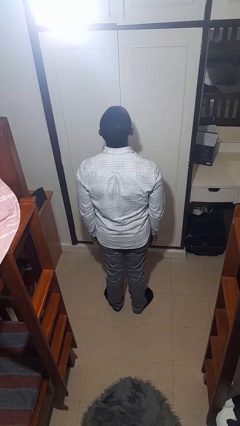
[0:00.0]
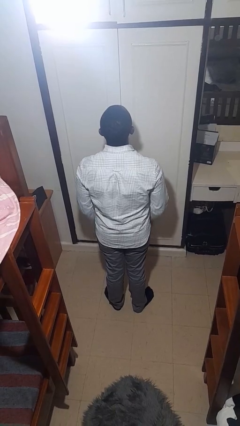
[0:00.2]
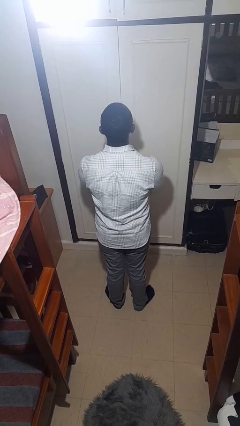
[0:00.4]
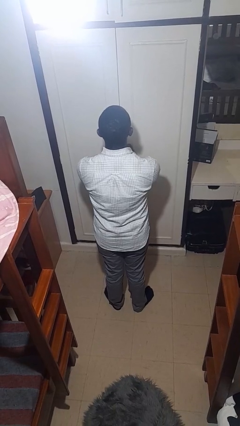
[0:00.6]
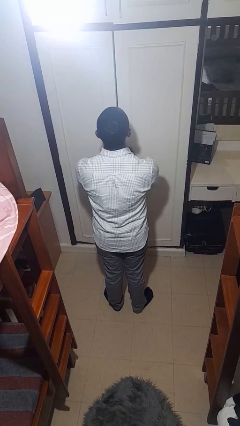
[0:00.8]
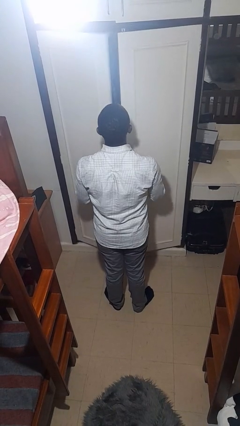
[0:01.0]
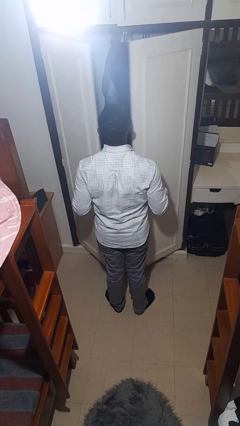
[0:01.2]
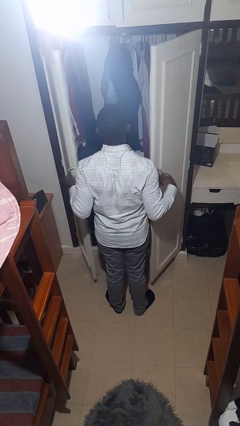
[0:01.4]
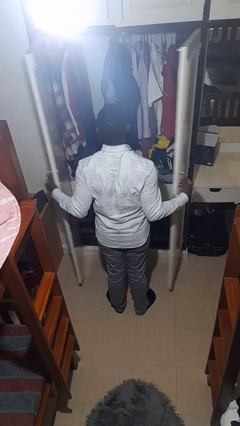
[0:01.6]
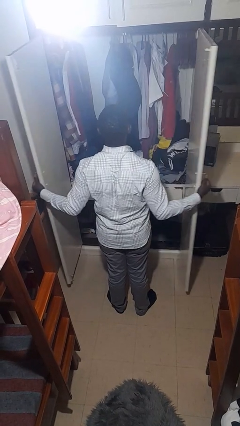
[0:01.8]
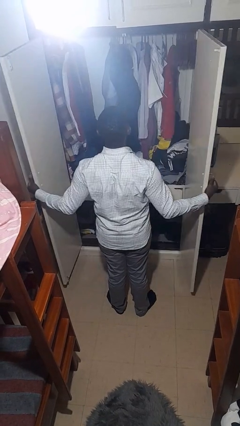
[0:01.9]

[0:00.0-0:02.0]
person opens closet door

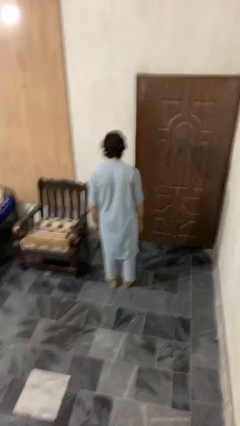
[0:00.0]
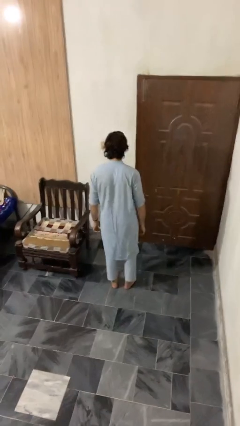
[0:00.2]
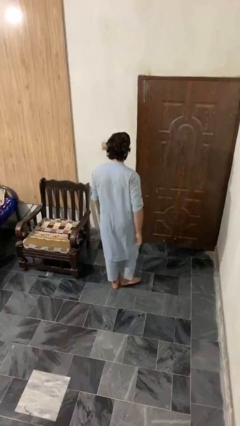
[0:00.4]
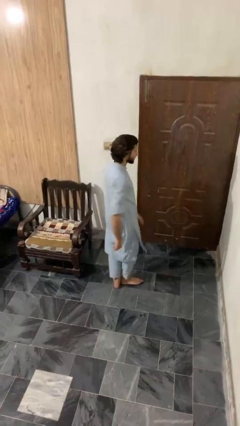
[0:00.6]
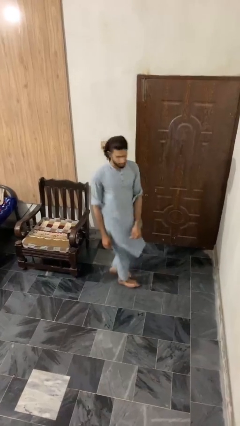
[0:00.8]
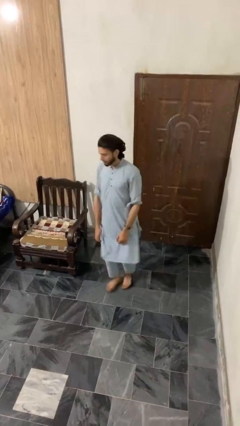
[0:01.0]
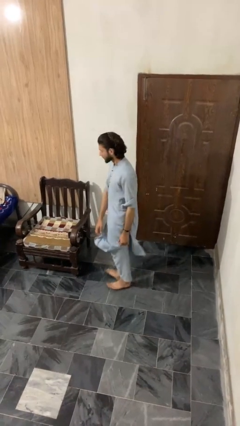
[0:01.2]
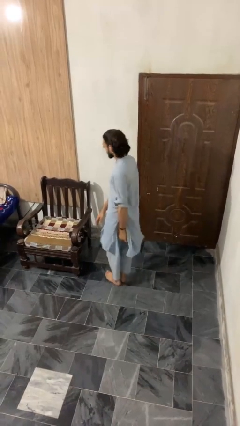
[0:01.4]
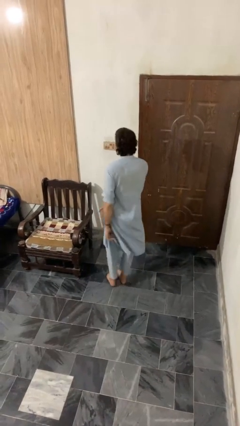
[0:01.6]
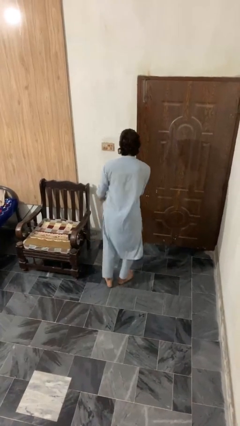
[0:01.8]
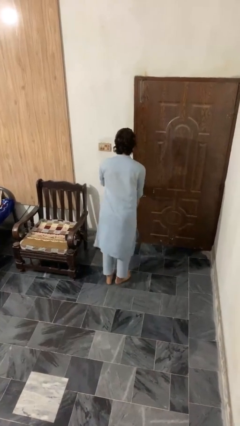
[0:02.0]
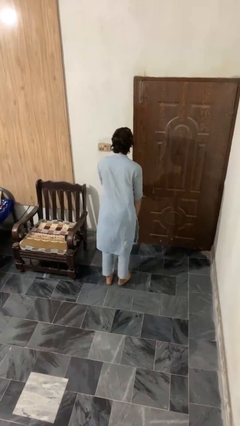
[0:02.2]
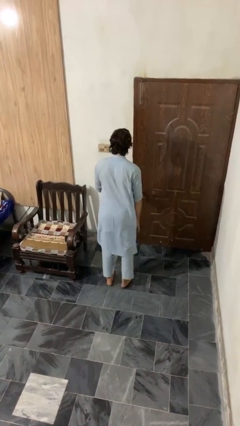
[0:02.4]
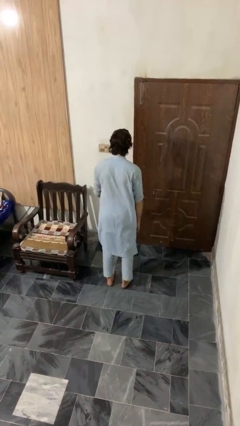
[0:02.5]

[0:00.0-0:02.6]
person twirls

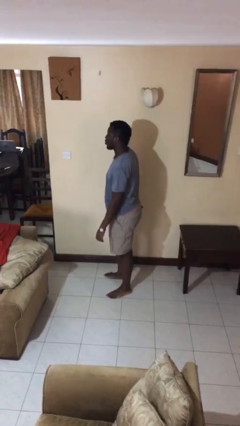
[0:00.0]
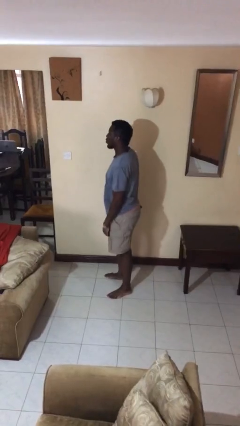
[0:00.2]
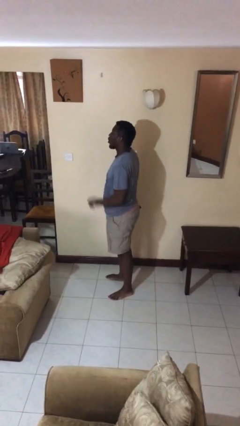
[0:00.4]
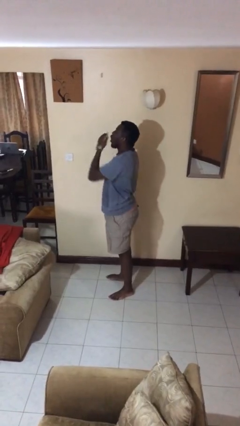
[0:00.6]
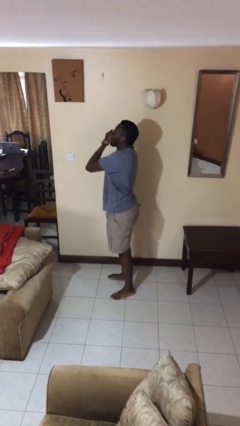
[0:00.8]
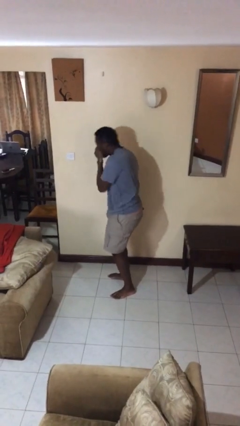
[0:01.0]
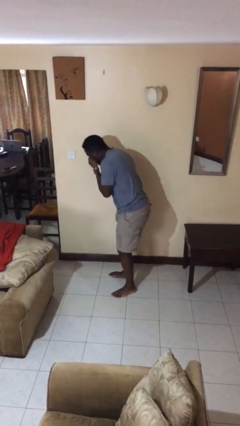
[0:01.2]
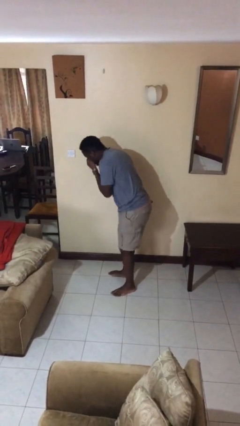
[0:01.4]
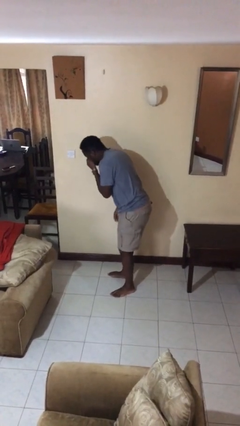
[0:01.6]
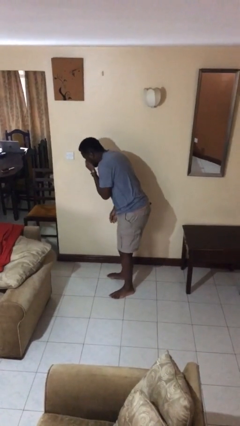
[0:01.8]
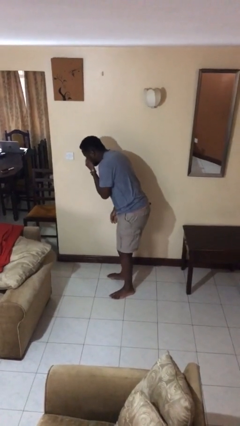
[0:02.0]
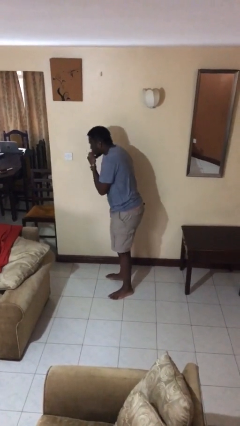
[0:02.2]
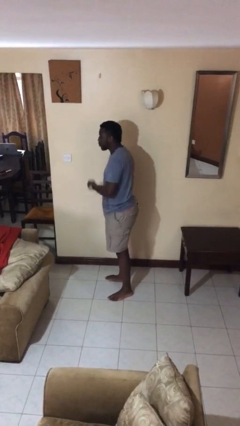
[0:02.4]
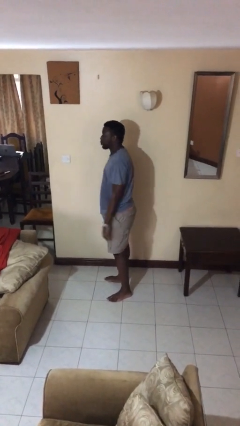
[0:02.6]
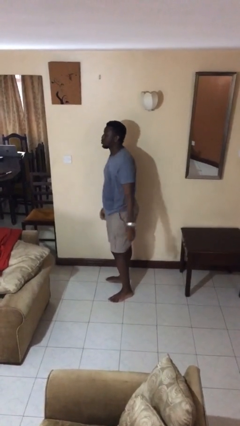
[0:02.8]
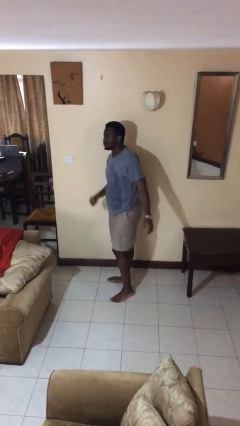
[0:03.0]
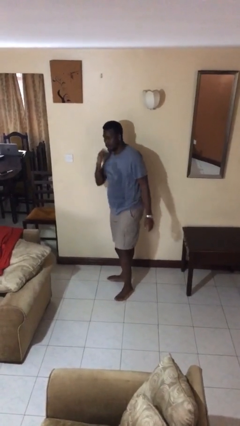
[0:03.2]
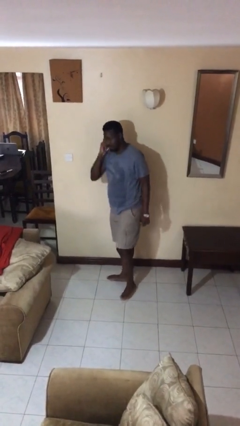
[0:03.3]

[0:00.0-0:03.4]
person sneezes into hand

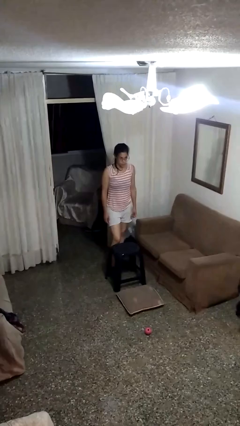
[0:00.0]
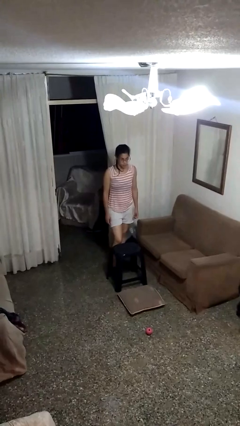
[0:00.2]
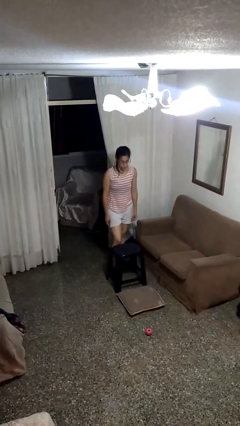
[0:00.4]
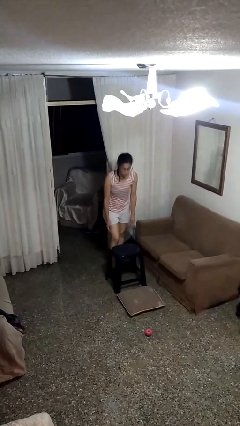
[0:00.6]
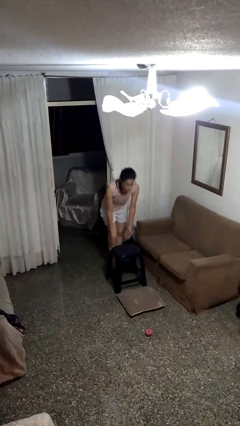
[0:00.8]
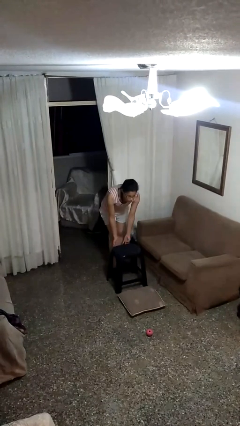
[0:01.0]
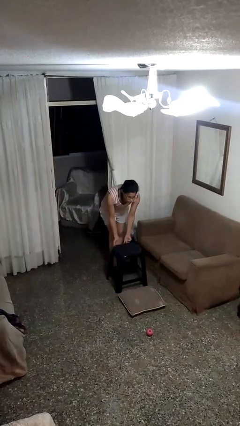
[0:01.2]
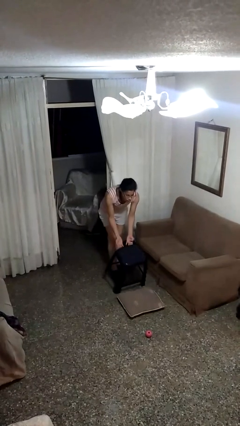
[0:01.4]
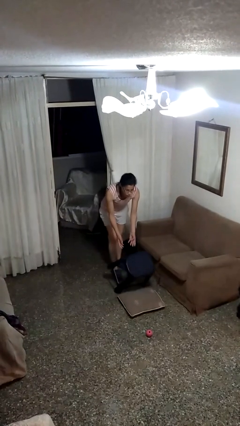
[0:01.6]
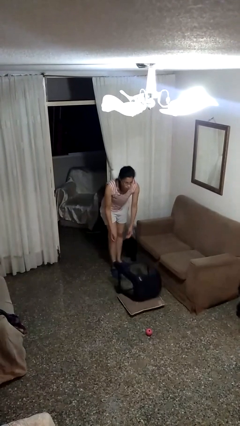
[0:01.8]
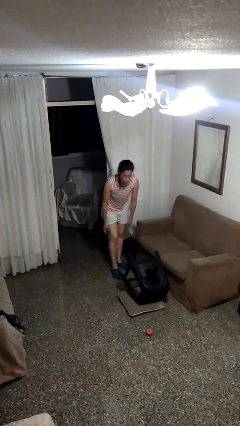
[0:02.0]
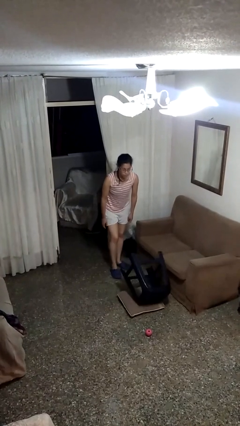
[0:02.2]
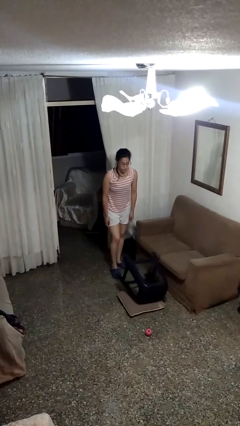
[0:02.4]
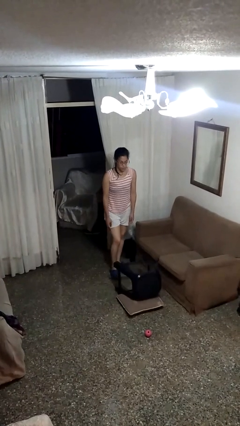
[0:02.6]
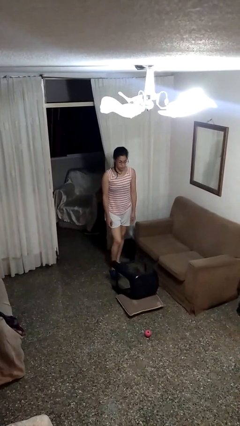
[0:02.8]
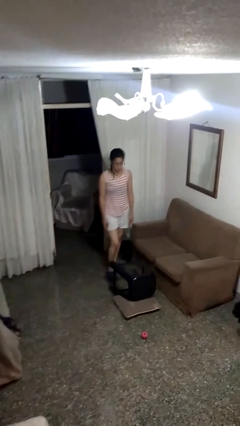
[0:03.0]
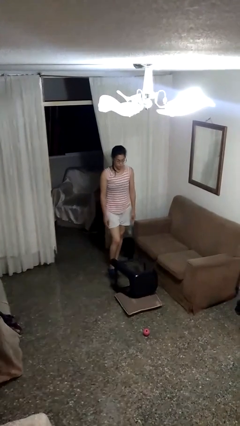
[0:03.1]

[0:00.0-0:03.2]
person knocks over furniture

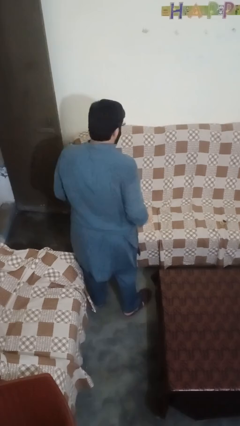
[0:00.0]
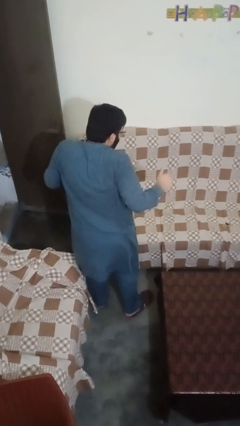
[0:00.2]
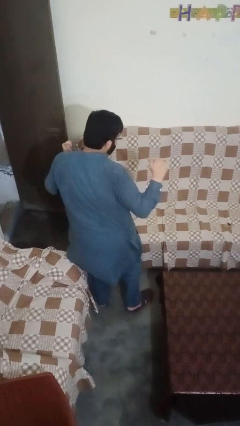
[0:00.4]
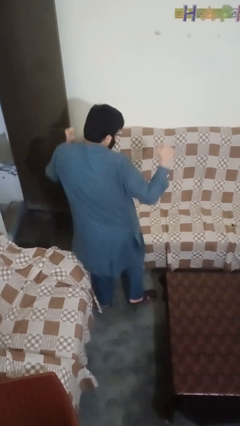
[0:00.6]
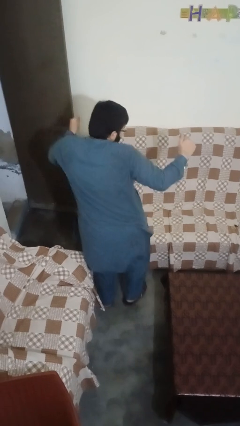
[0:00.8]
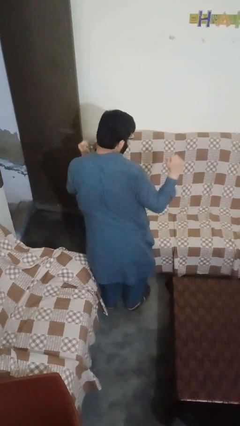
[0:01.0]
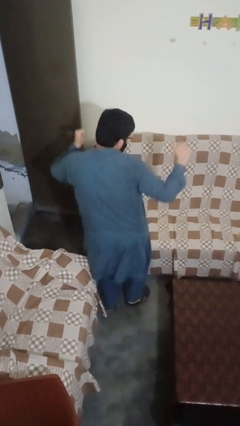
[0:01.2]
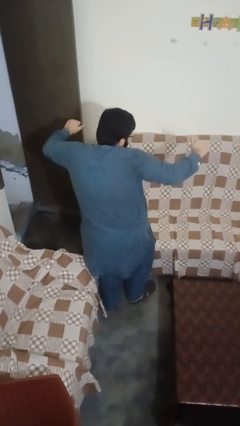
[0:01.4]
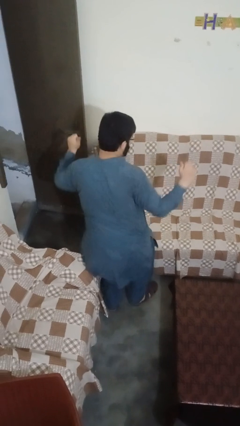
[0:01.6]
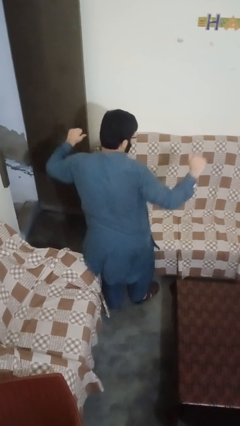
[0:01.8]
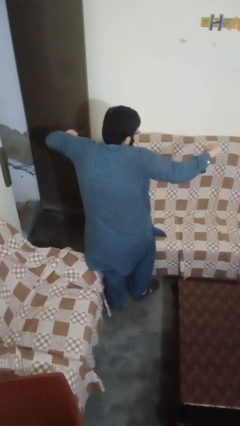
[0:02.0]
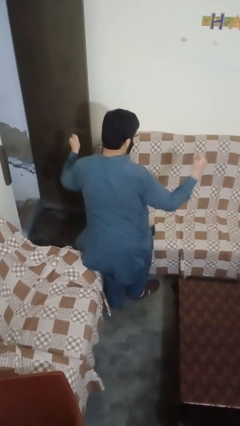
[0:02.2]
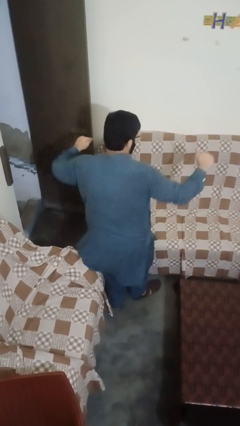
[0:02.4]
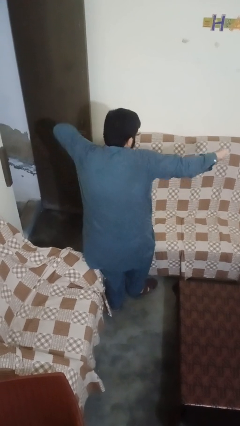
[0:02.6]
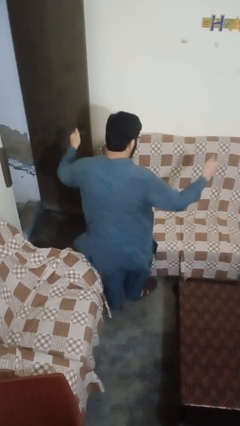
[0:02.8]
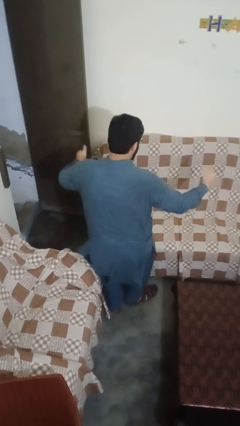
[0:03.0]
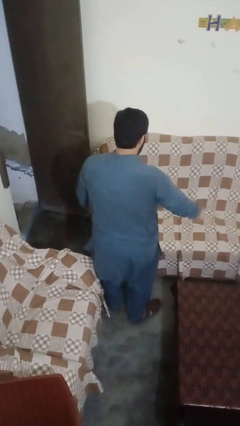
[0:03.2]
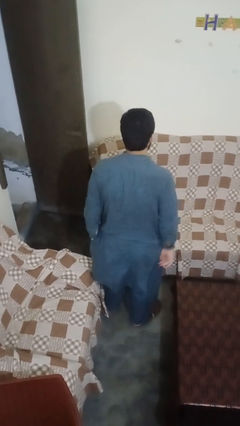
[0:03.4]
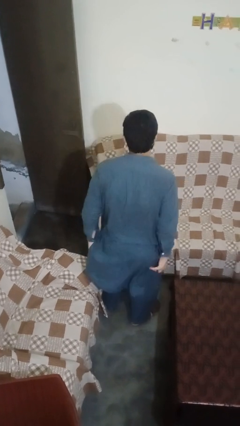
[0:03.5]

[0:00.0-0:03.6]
person dances in place

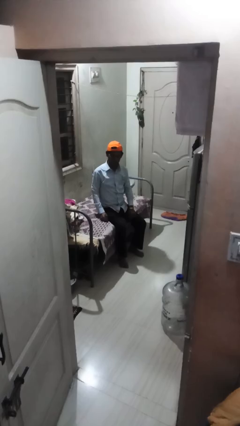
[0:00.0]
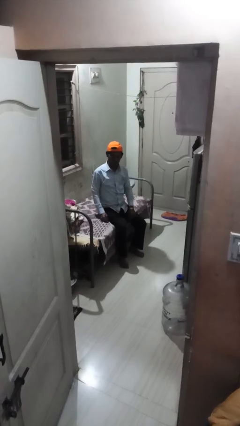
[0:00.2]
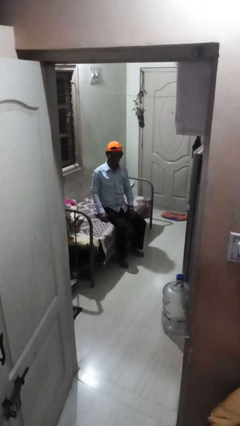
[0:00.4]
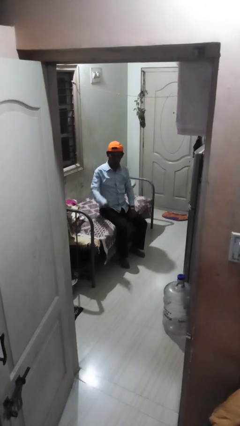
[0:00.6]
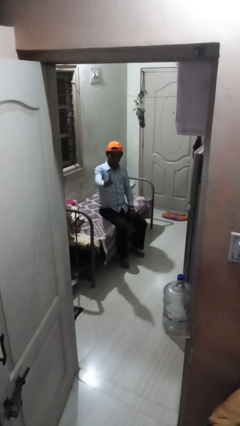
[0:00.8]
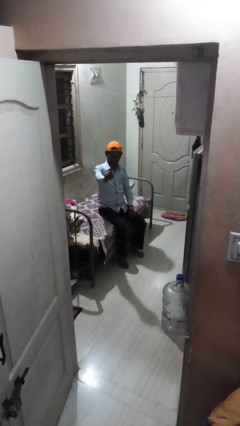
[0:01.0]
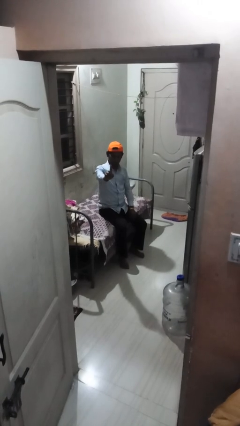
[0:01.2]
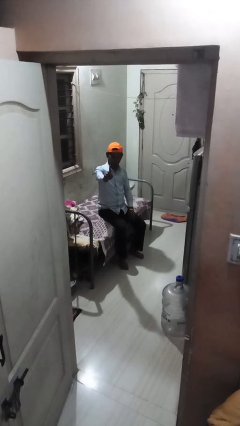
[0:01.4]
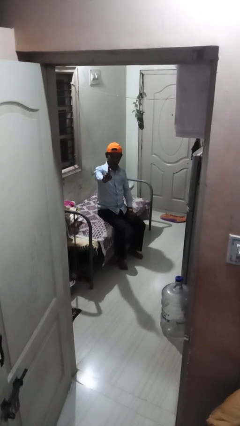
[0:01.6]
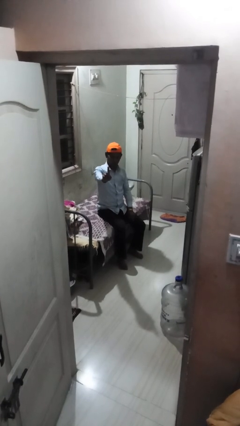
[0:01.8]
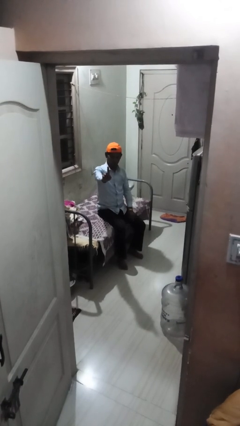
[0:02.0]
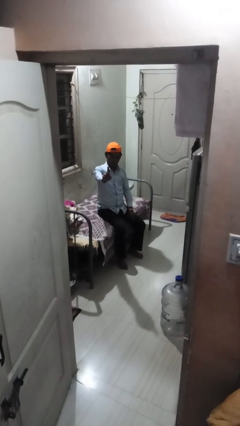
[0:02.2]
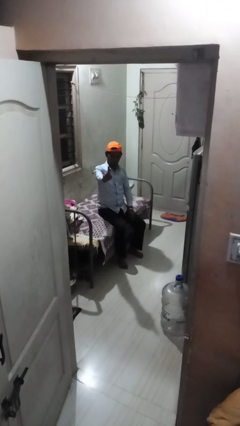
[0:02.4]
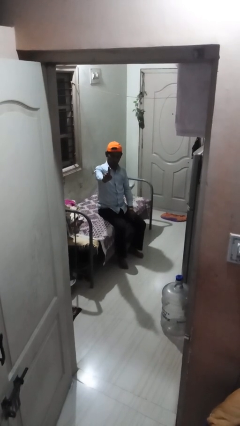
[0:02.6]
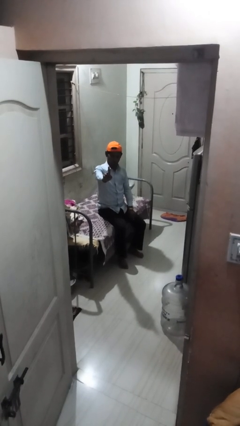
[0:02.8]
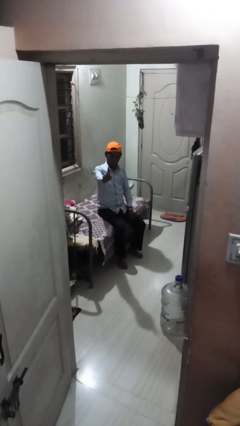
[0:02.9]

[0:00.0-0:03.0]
person gestures number one
